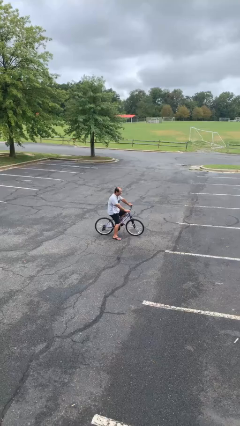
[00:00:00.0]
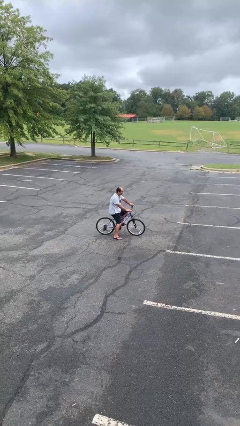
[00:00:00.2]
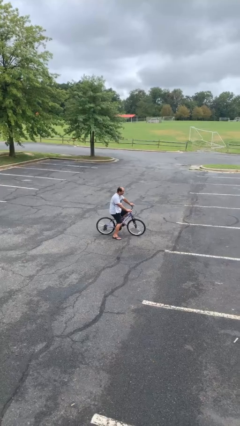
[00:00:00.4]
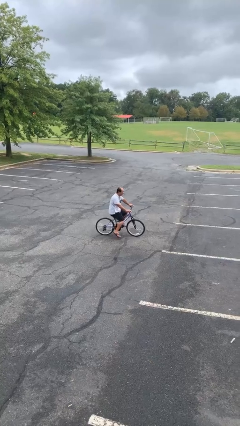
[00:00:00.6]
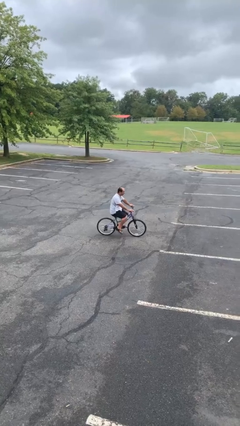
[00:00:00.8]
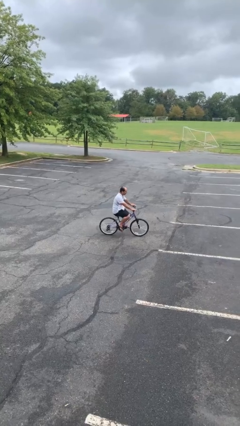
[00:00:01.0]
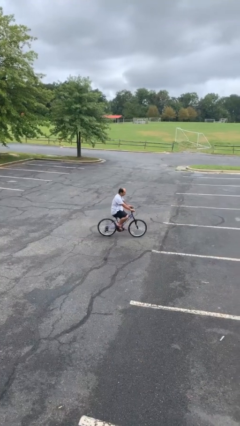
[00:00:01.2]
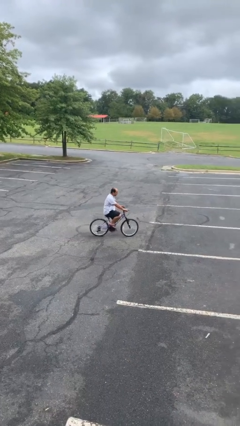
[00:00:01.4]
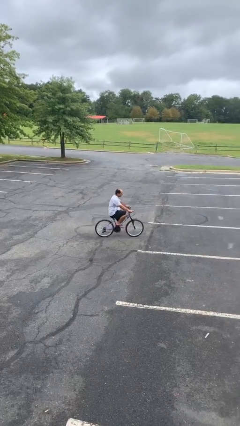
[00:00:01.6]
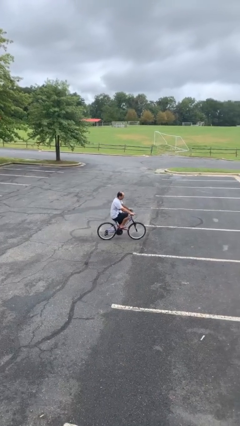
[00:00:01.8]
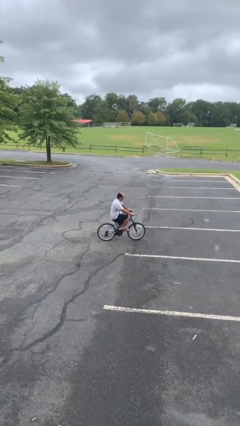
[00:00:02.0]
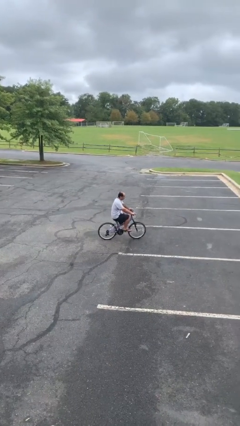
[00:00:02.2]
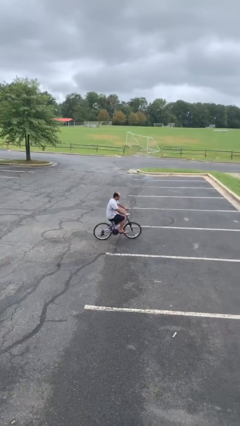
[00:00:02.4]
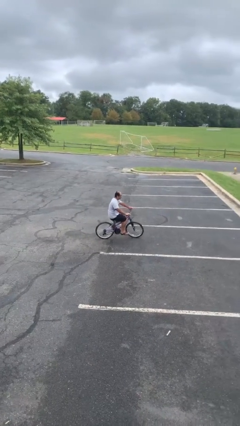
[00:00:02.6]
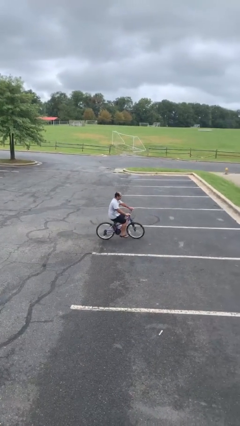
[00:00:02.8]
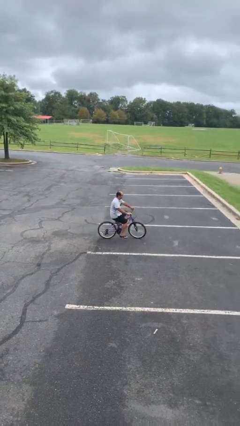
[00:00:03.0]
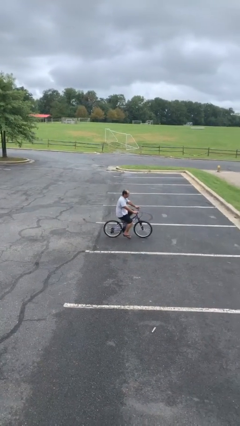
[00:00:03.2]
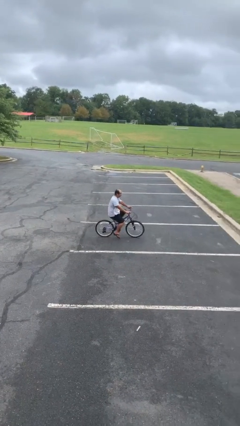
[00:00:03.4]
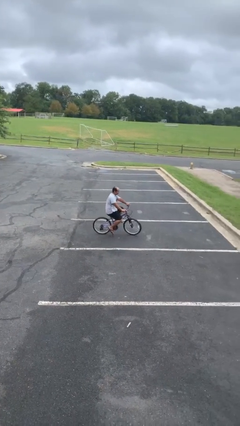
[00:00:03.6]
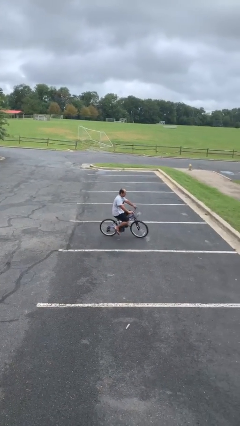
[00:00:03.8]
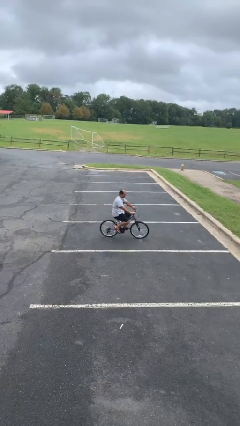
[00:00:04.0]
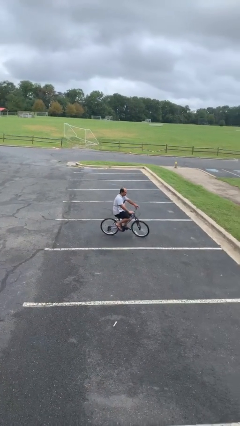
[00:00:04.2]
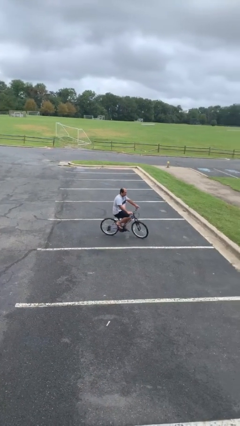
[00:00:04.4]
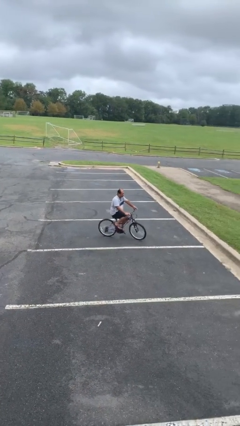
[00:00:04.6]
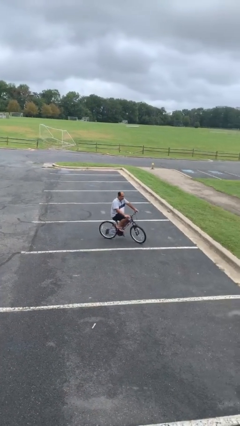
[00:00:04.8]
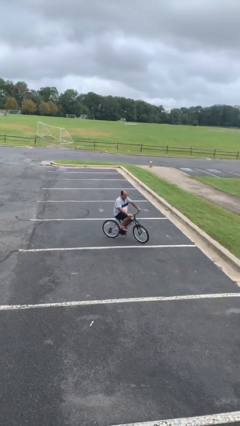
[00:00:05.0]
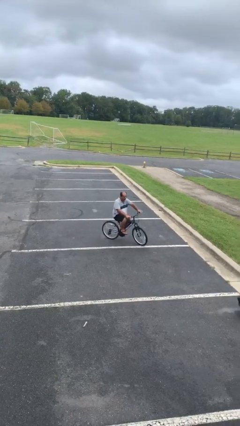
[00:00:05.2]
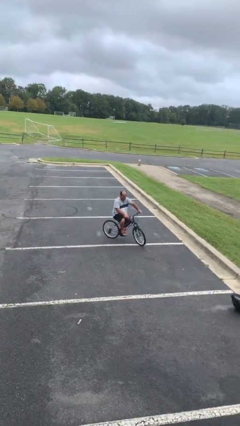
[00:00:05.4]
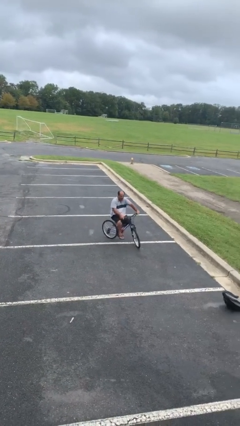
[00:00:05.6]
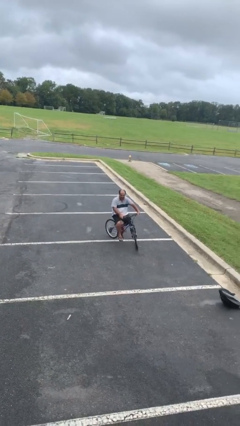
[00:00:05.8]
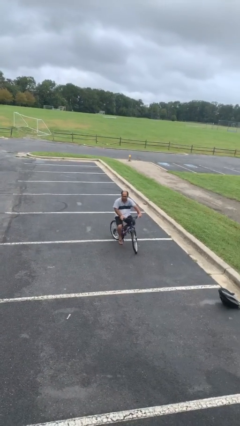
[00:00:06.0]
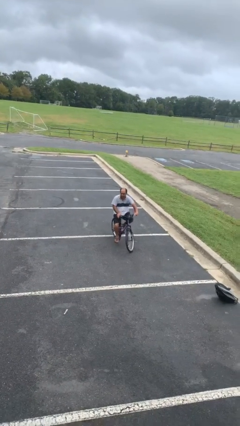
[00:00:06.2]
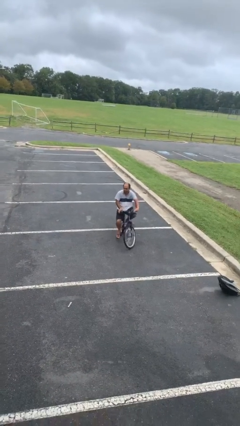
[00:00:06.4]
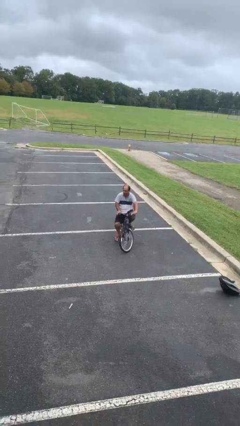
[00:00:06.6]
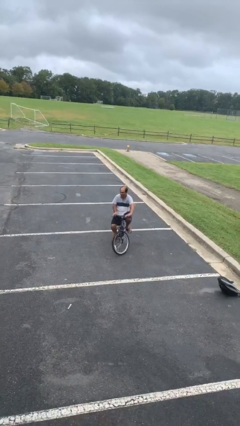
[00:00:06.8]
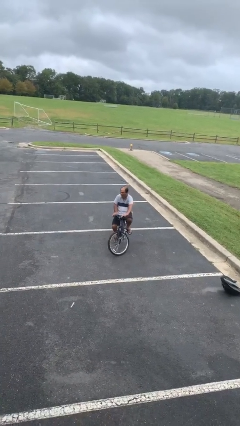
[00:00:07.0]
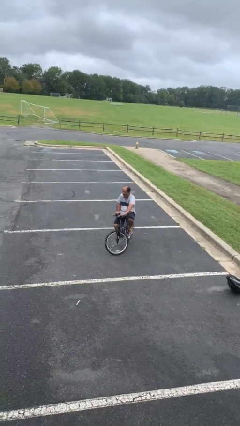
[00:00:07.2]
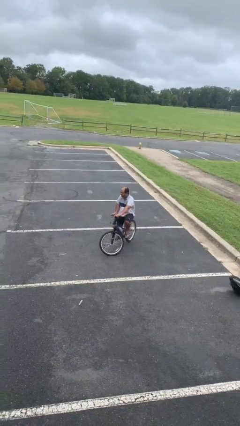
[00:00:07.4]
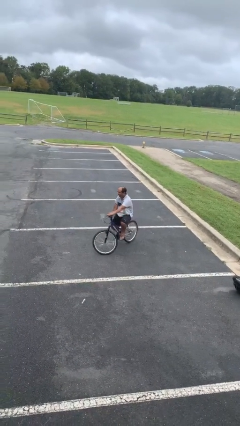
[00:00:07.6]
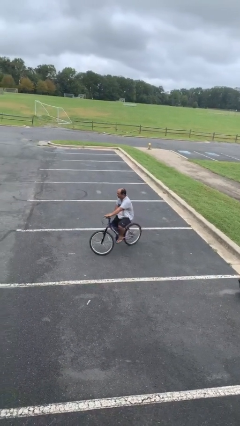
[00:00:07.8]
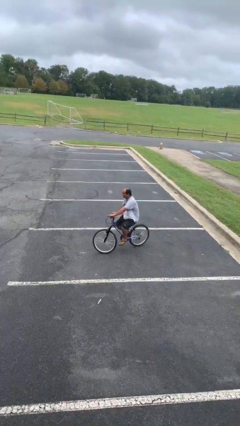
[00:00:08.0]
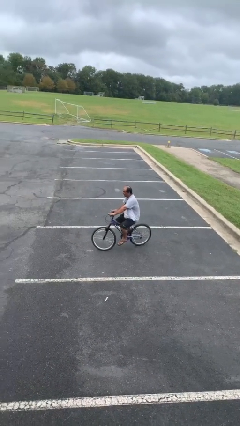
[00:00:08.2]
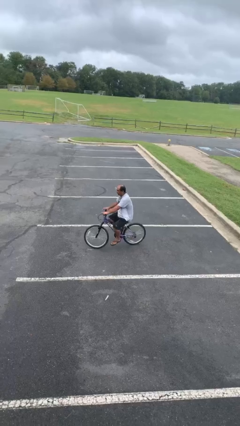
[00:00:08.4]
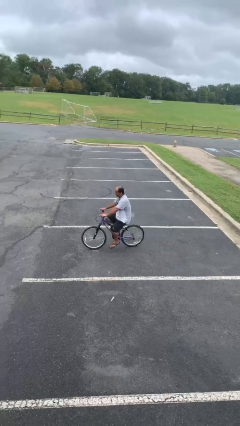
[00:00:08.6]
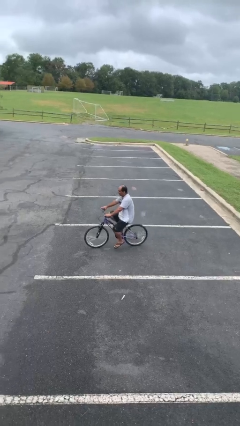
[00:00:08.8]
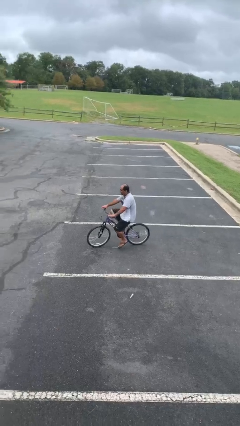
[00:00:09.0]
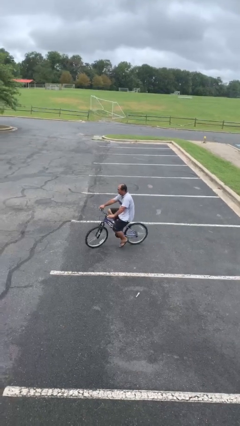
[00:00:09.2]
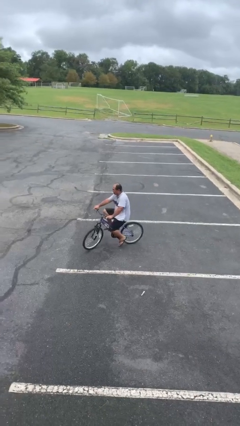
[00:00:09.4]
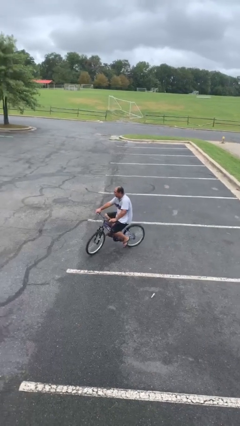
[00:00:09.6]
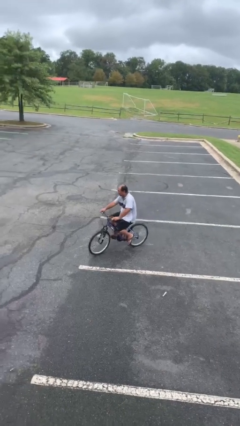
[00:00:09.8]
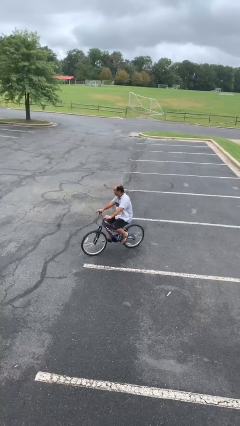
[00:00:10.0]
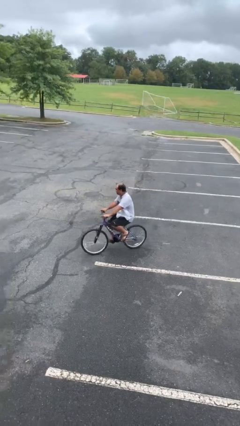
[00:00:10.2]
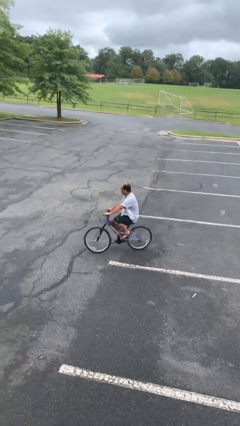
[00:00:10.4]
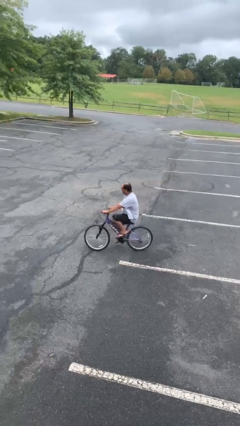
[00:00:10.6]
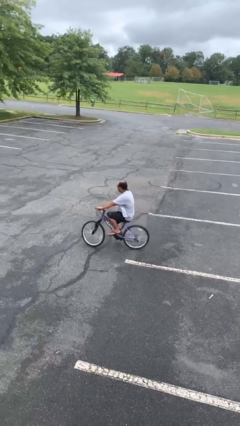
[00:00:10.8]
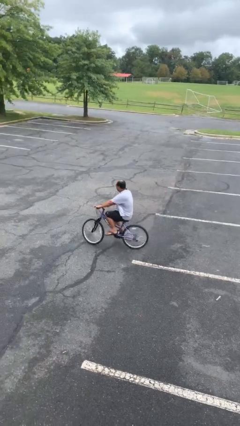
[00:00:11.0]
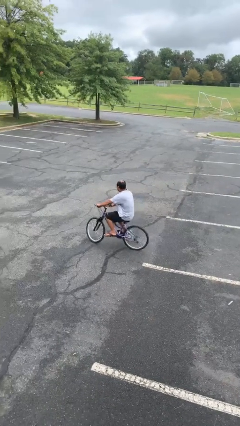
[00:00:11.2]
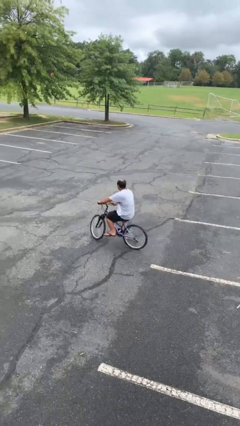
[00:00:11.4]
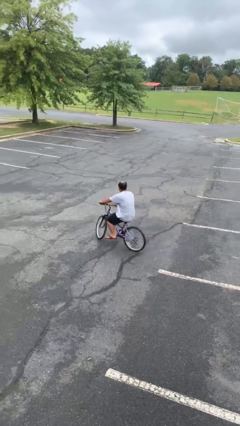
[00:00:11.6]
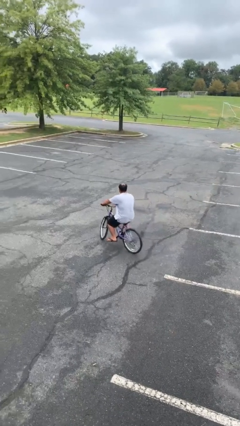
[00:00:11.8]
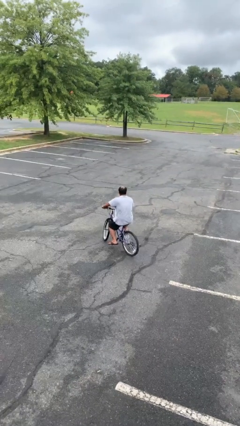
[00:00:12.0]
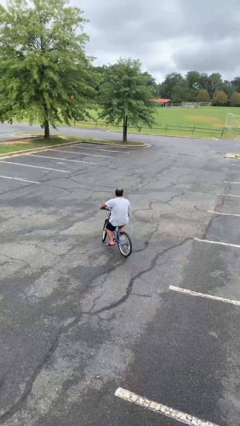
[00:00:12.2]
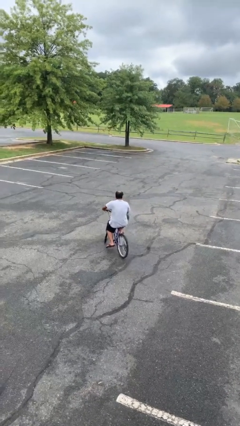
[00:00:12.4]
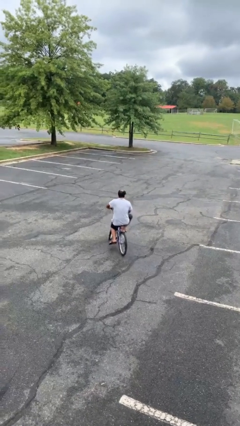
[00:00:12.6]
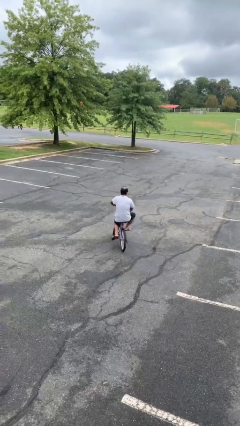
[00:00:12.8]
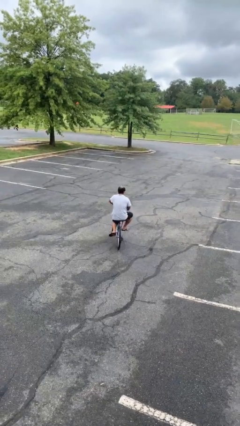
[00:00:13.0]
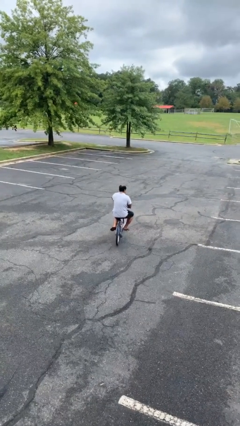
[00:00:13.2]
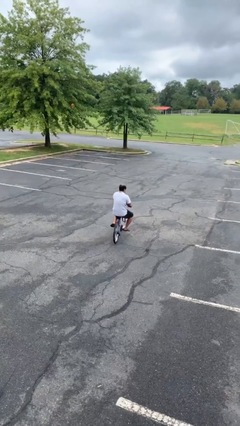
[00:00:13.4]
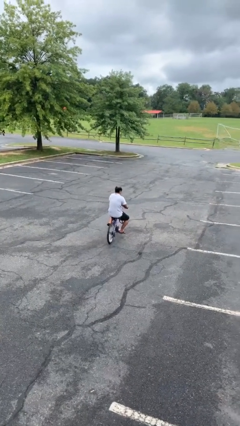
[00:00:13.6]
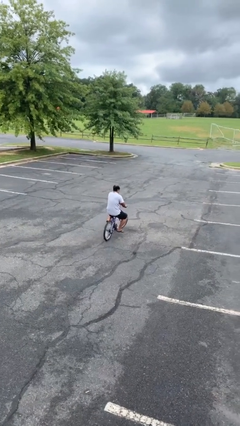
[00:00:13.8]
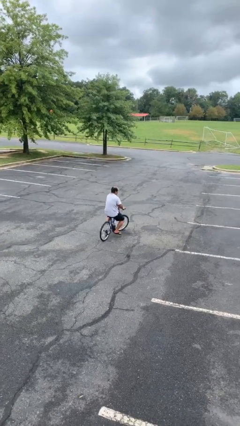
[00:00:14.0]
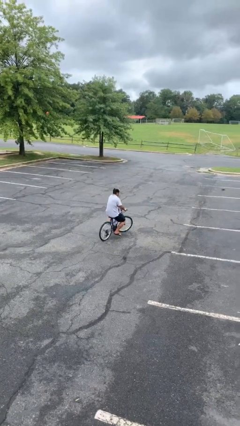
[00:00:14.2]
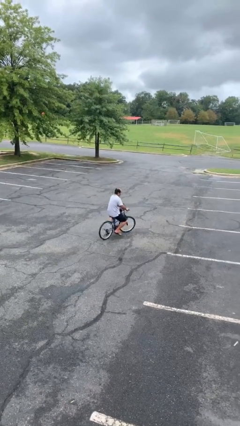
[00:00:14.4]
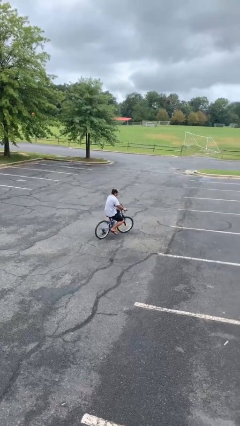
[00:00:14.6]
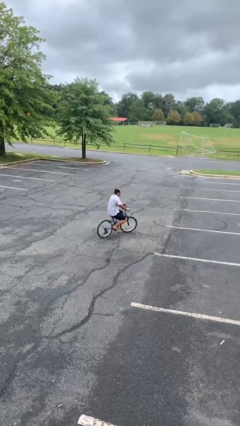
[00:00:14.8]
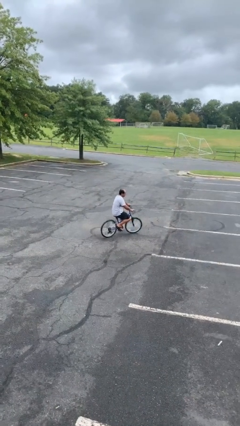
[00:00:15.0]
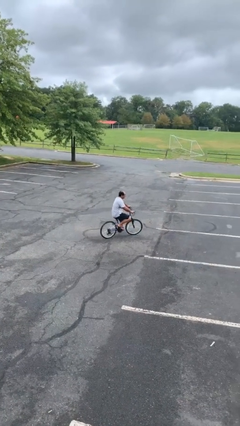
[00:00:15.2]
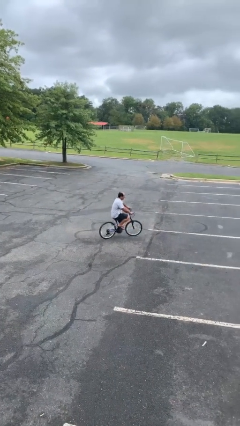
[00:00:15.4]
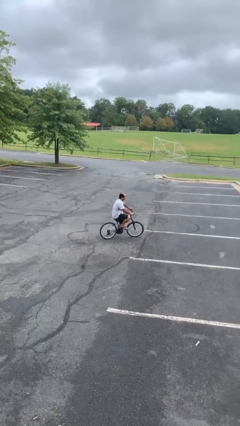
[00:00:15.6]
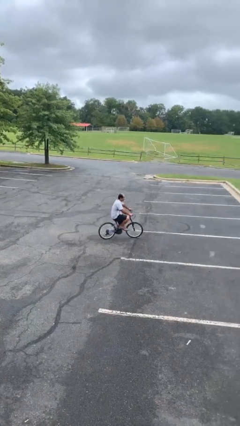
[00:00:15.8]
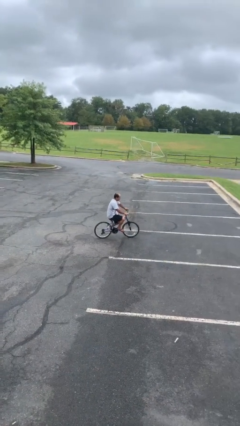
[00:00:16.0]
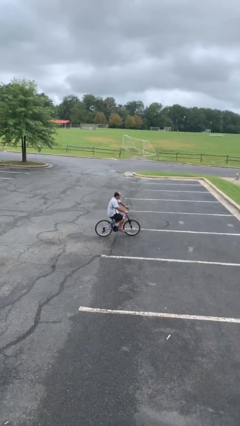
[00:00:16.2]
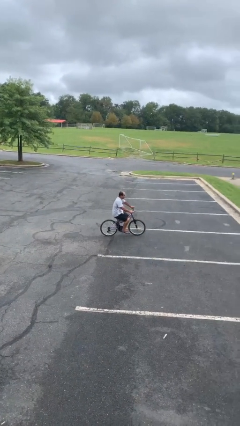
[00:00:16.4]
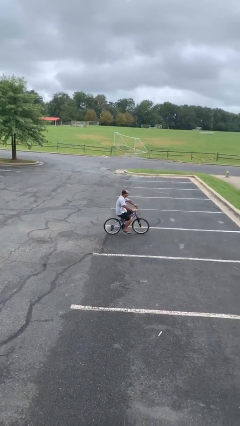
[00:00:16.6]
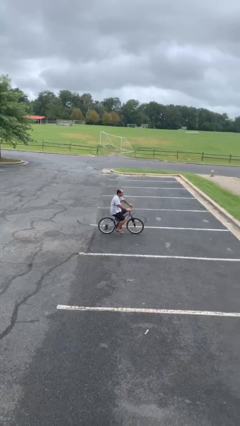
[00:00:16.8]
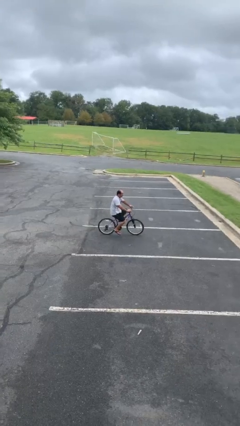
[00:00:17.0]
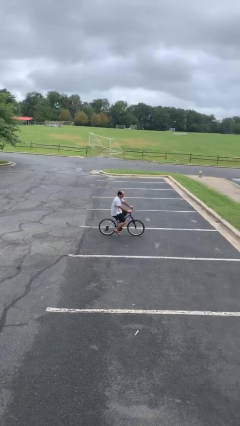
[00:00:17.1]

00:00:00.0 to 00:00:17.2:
person rides bicycle

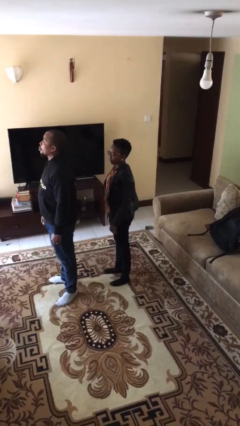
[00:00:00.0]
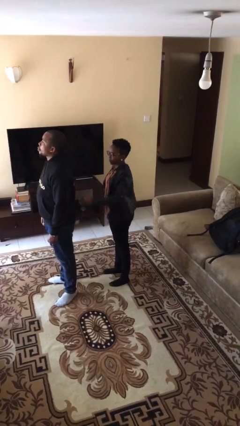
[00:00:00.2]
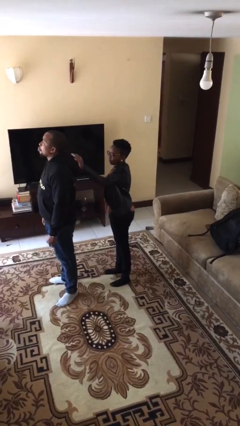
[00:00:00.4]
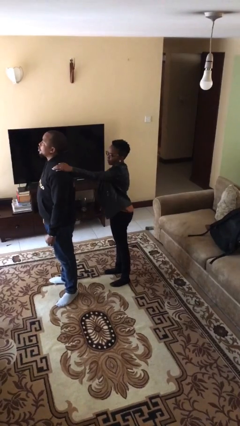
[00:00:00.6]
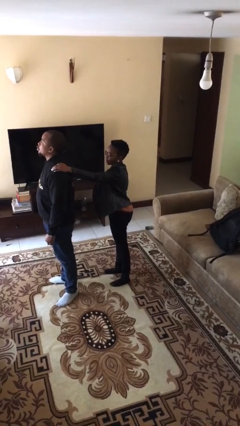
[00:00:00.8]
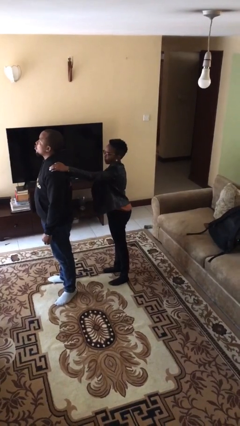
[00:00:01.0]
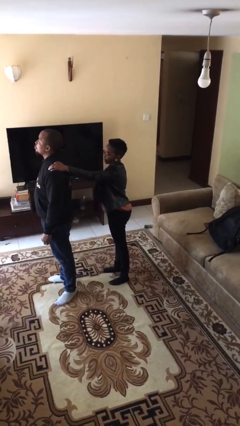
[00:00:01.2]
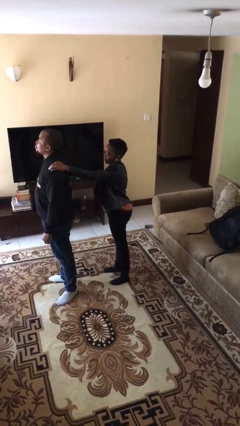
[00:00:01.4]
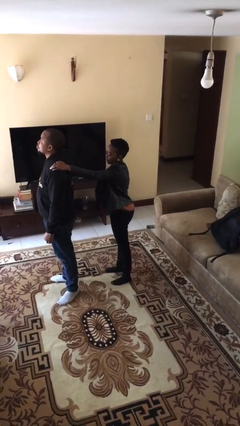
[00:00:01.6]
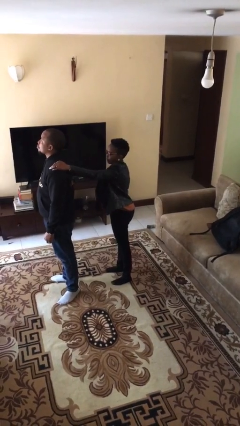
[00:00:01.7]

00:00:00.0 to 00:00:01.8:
person grabs person by shoulder
